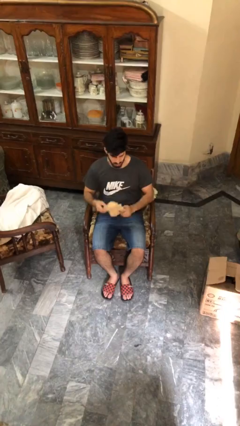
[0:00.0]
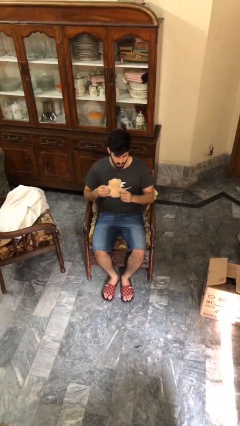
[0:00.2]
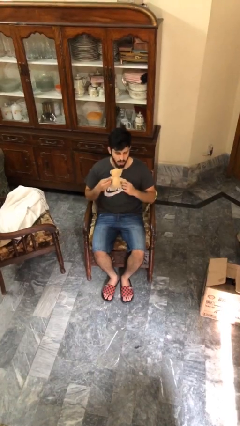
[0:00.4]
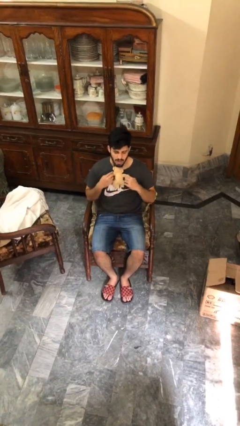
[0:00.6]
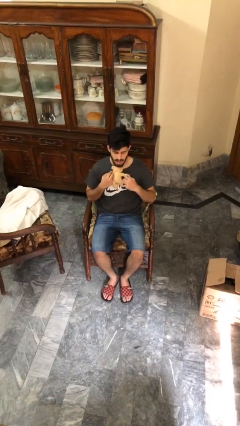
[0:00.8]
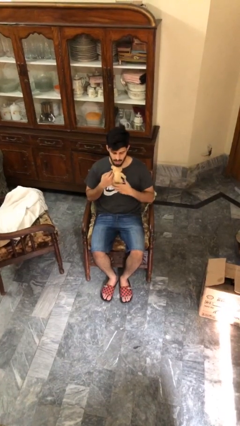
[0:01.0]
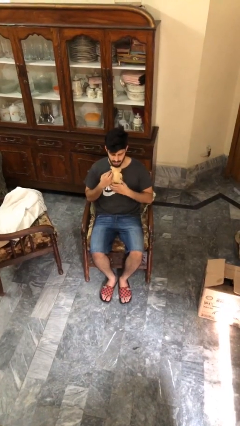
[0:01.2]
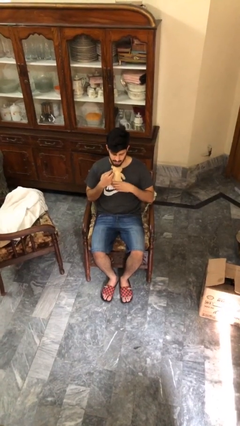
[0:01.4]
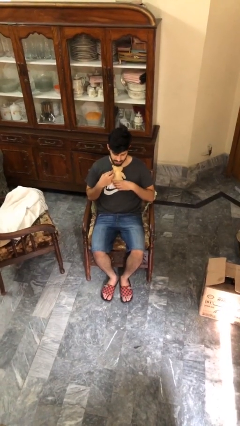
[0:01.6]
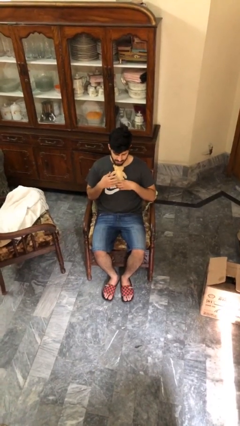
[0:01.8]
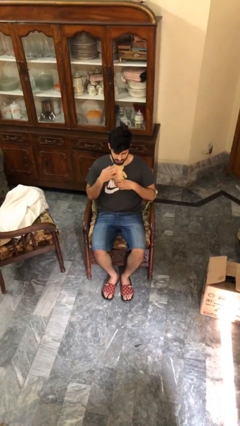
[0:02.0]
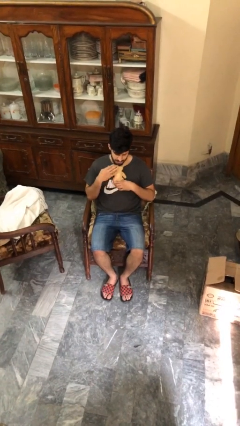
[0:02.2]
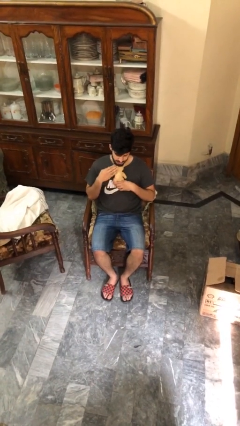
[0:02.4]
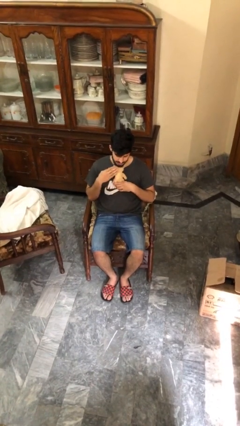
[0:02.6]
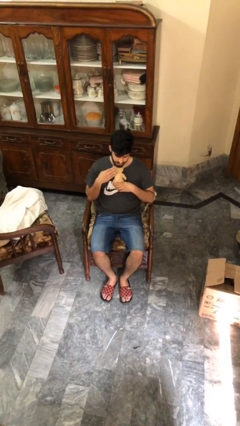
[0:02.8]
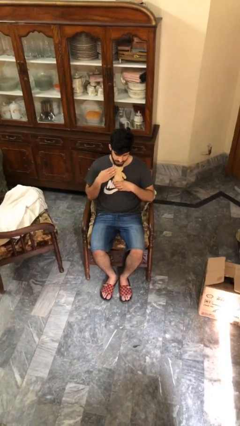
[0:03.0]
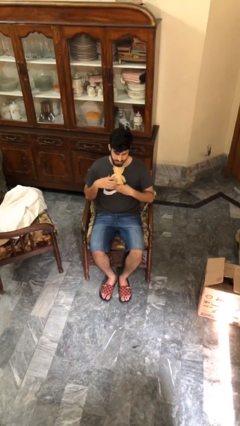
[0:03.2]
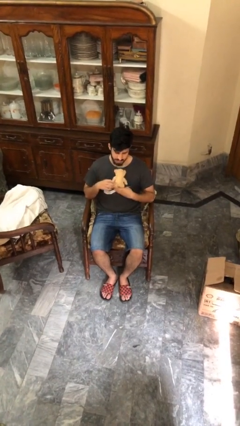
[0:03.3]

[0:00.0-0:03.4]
person hugs stuffed animal

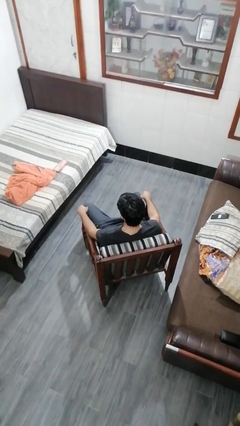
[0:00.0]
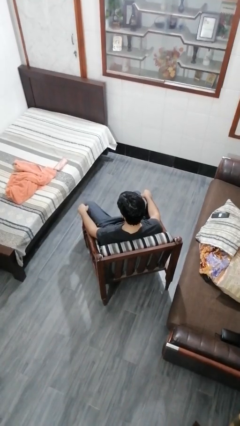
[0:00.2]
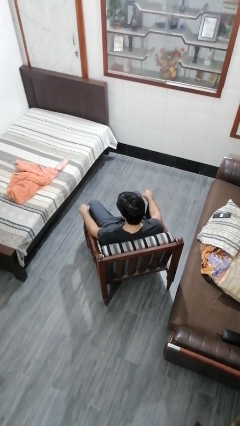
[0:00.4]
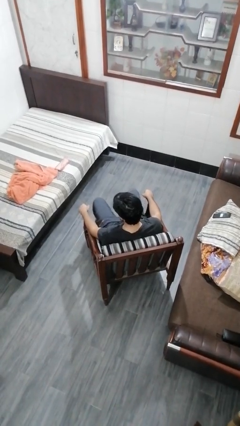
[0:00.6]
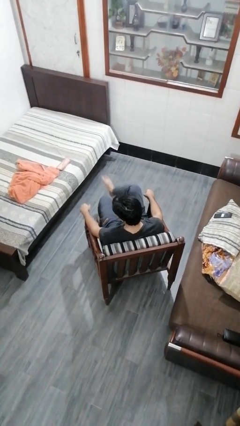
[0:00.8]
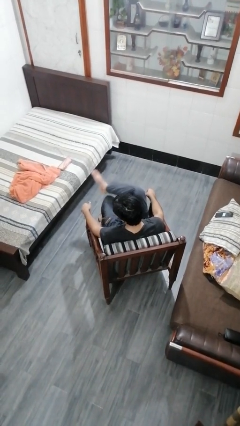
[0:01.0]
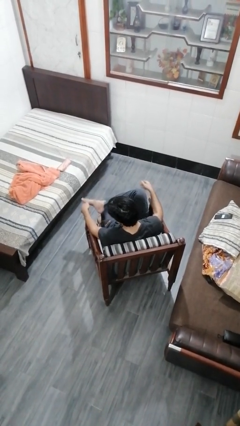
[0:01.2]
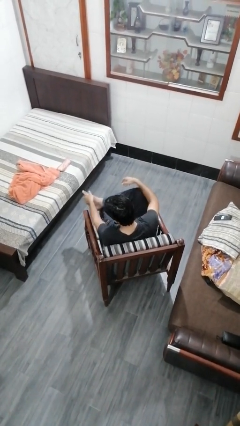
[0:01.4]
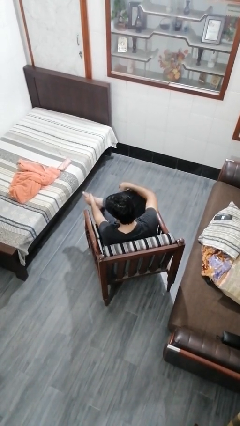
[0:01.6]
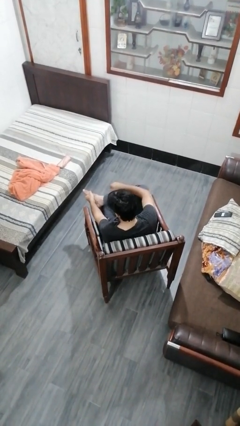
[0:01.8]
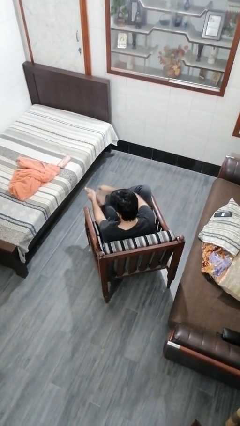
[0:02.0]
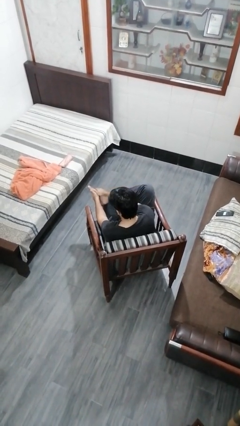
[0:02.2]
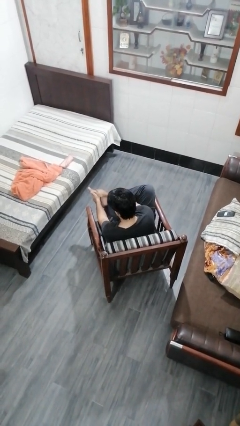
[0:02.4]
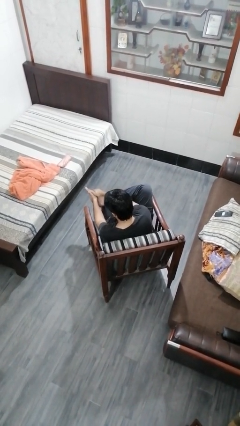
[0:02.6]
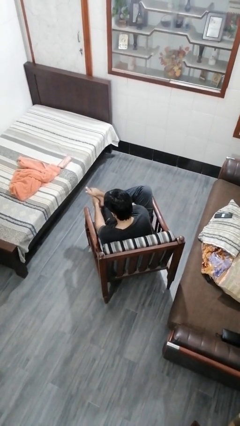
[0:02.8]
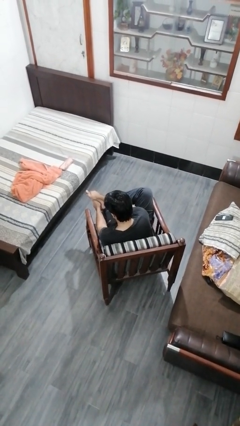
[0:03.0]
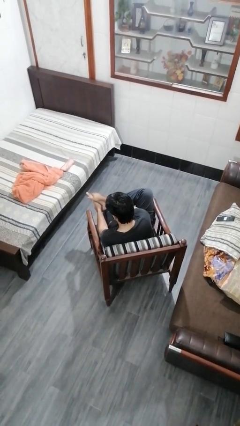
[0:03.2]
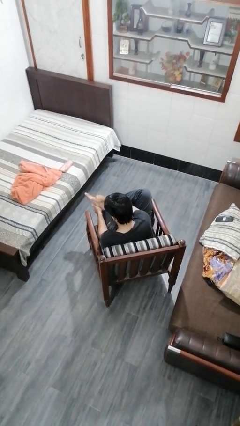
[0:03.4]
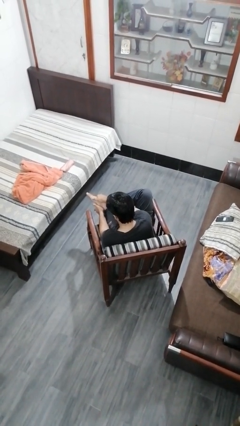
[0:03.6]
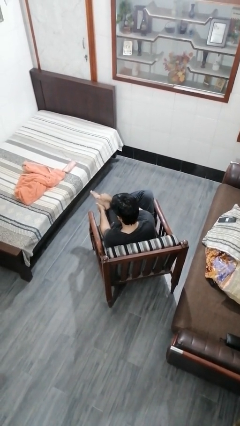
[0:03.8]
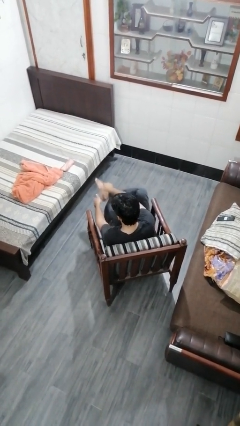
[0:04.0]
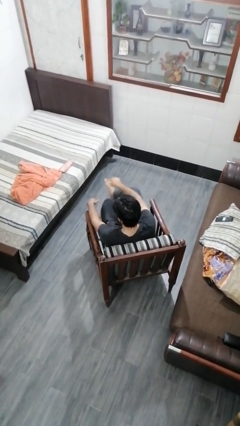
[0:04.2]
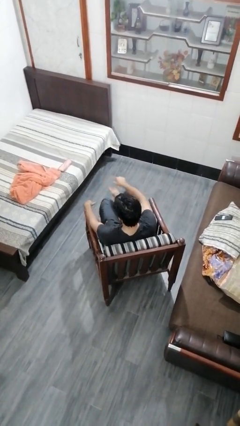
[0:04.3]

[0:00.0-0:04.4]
person rubs foot

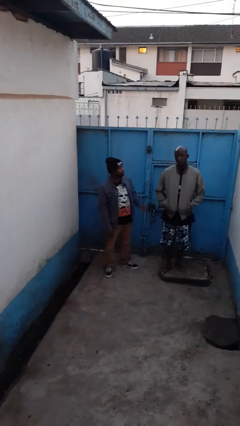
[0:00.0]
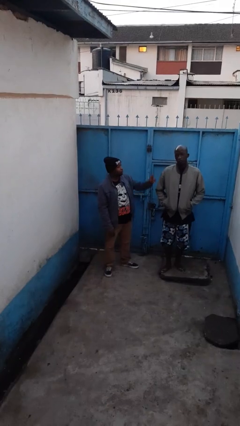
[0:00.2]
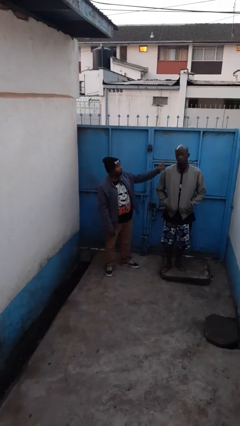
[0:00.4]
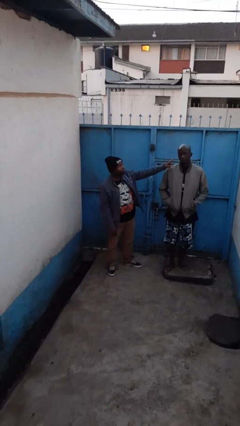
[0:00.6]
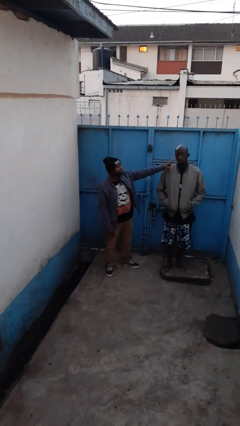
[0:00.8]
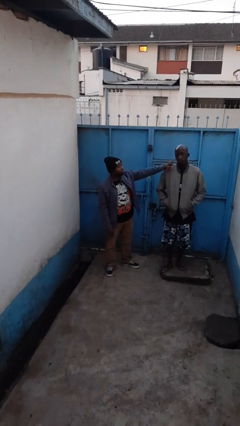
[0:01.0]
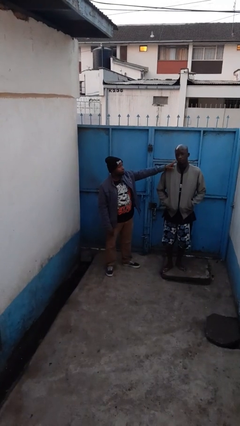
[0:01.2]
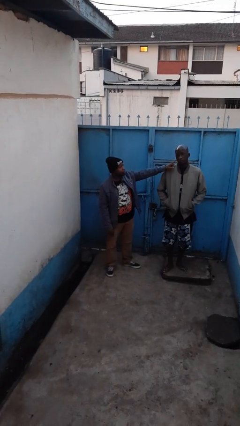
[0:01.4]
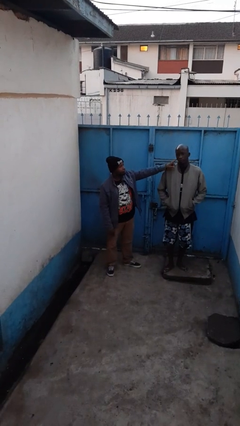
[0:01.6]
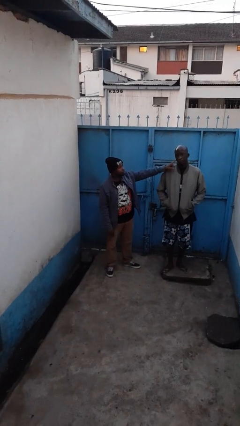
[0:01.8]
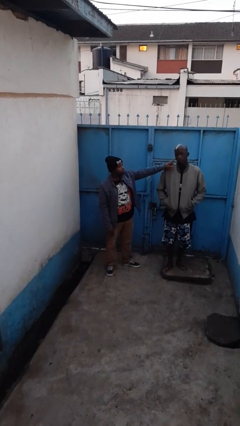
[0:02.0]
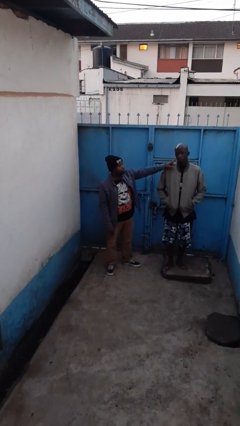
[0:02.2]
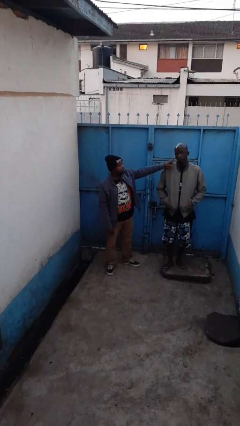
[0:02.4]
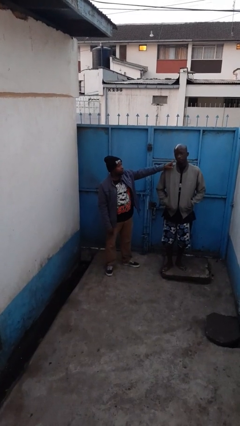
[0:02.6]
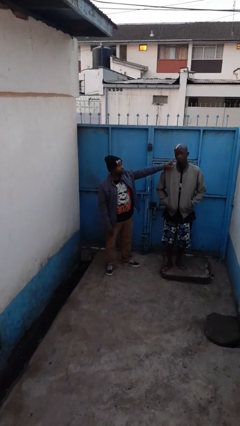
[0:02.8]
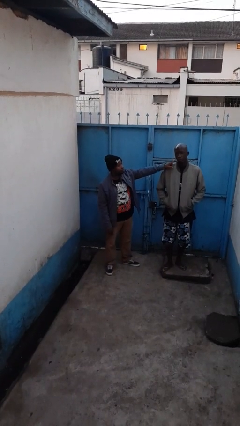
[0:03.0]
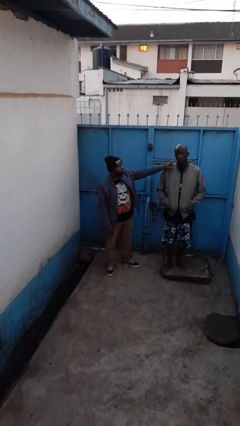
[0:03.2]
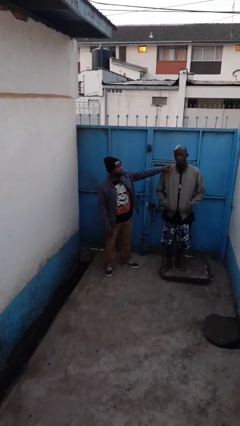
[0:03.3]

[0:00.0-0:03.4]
person touches face of person

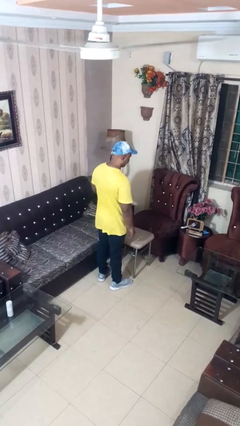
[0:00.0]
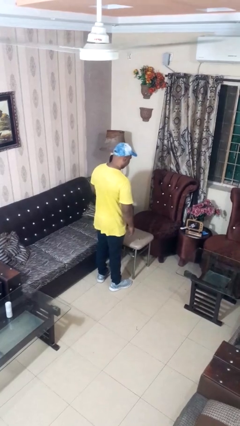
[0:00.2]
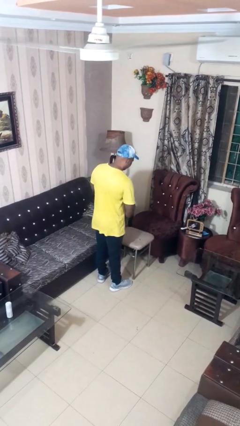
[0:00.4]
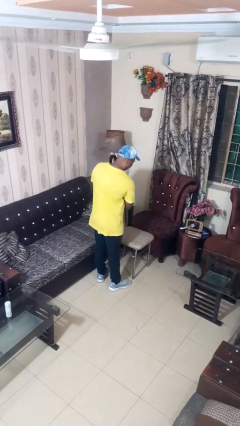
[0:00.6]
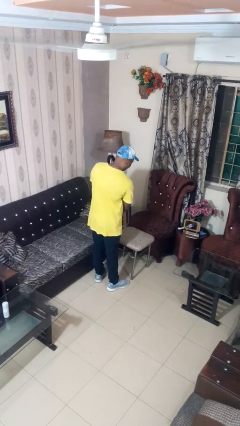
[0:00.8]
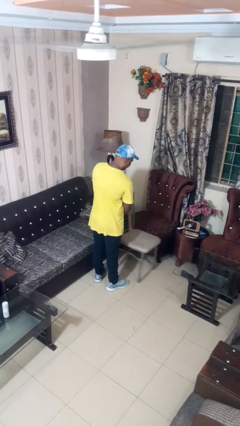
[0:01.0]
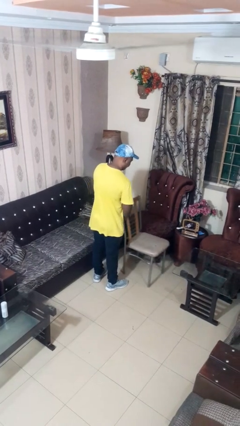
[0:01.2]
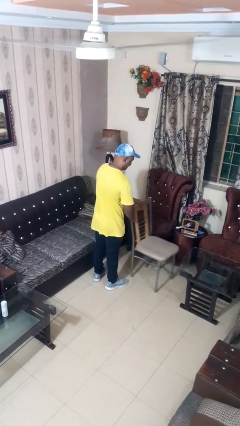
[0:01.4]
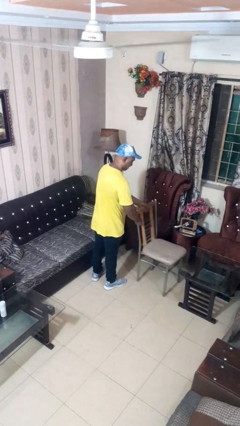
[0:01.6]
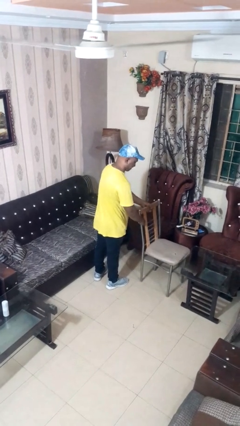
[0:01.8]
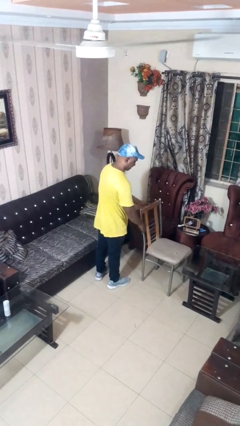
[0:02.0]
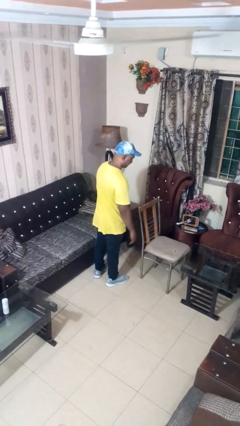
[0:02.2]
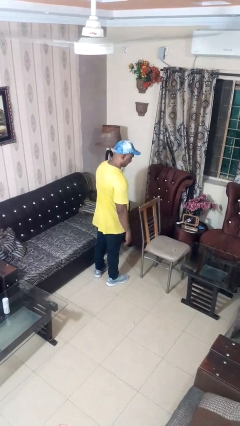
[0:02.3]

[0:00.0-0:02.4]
person pushes in chair

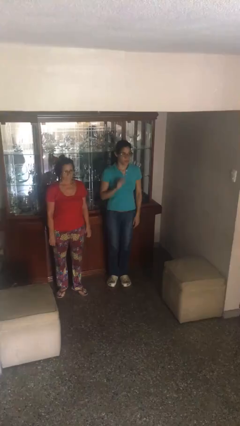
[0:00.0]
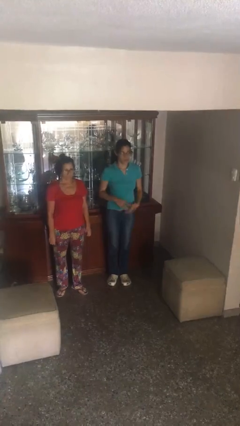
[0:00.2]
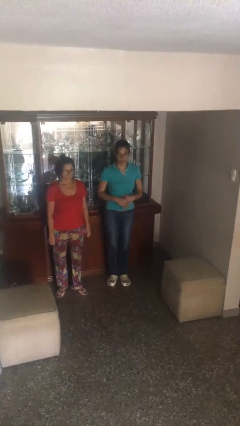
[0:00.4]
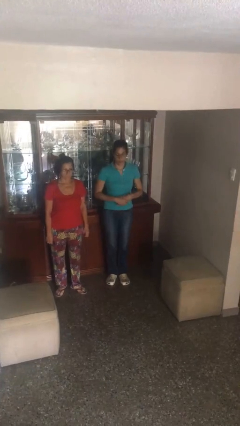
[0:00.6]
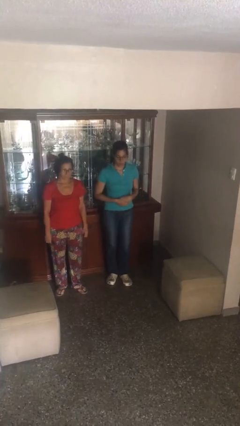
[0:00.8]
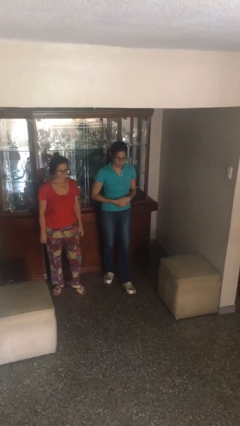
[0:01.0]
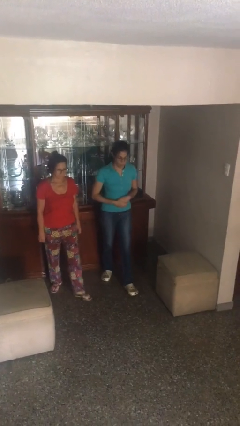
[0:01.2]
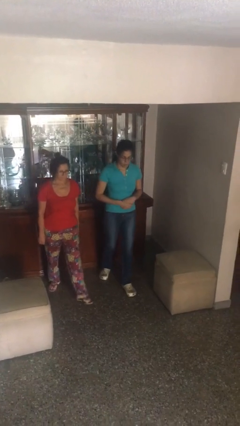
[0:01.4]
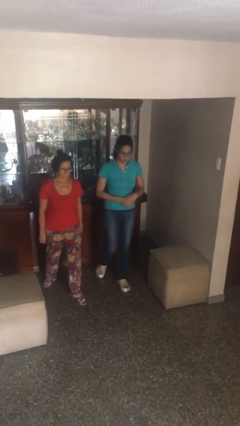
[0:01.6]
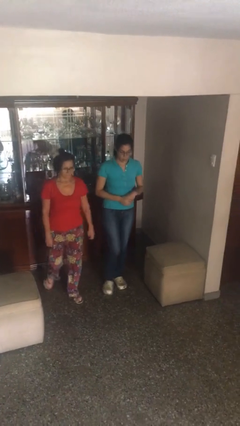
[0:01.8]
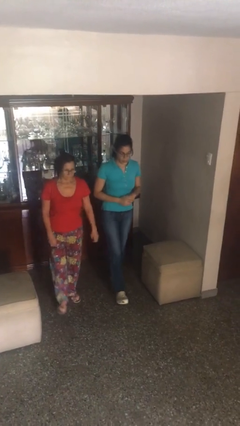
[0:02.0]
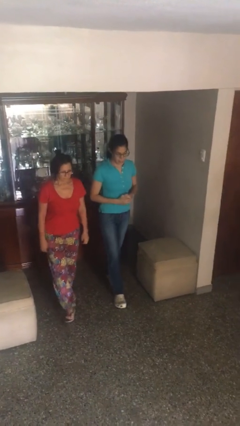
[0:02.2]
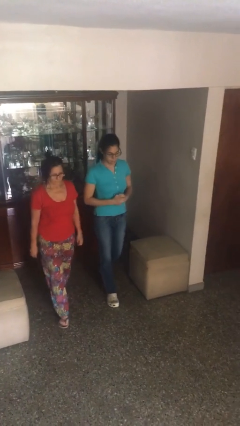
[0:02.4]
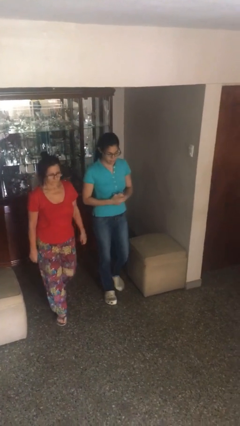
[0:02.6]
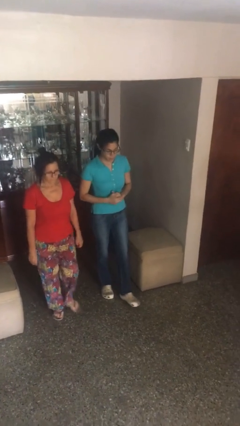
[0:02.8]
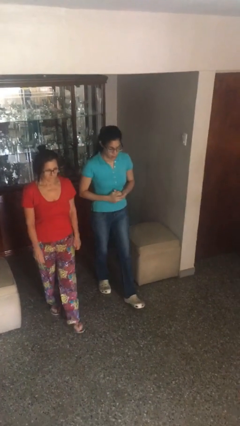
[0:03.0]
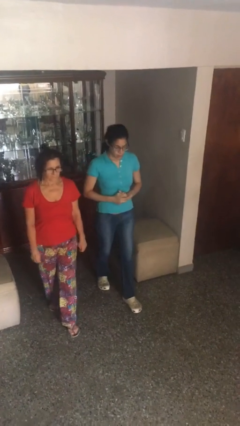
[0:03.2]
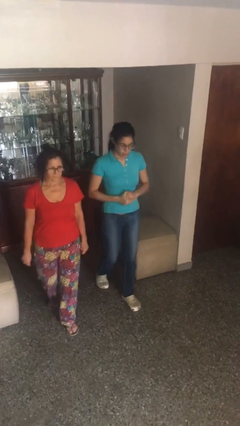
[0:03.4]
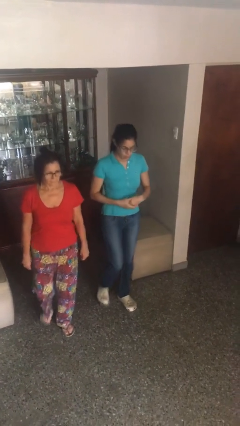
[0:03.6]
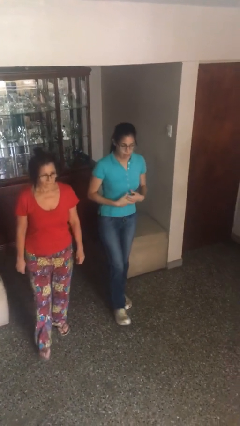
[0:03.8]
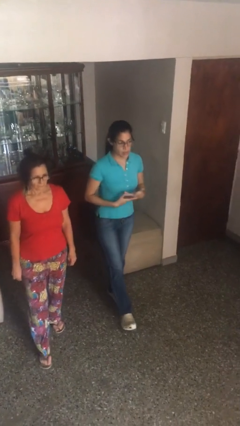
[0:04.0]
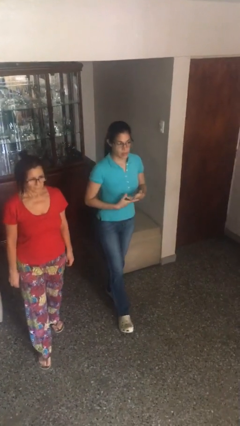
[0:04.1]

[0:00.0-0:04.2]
person talks to person
